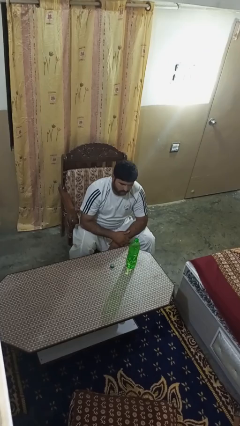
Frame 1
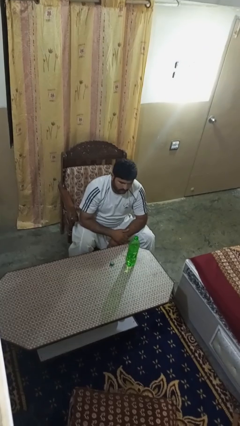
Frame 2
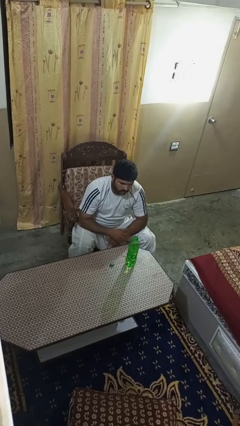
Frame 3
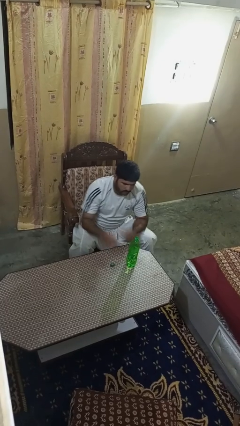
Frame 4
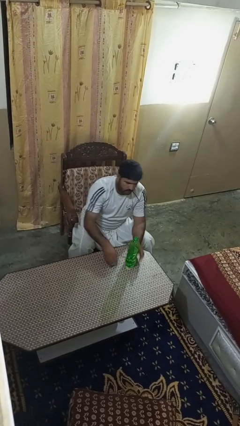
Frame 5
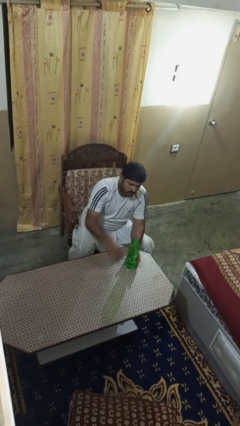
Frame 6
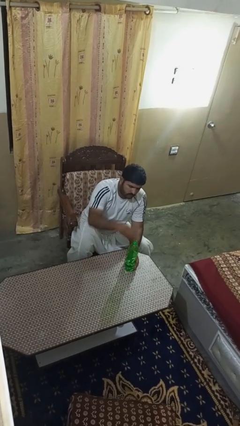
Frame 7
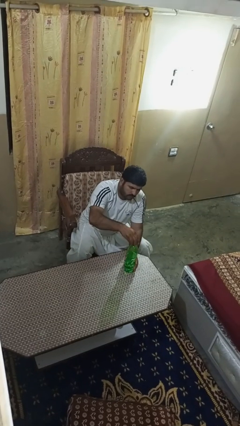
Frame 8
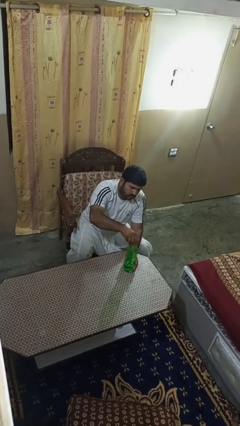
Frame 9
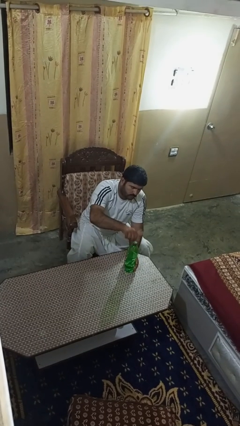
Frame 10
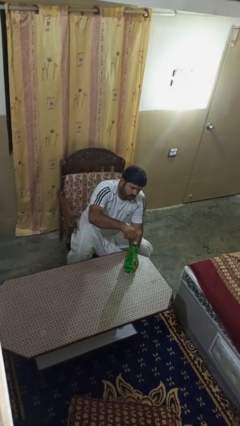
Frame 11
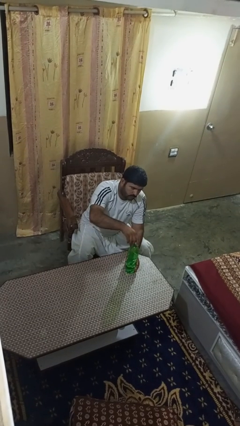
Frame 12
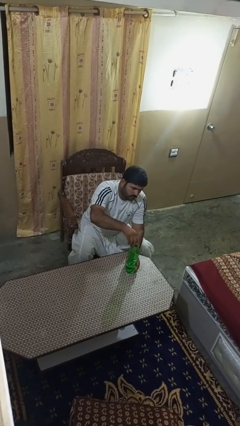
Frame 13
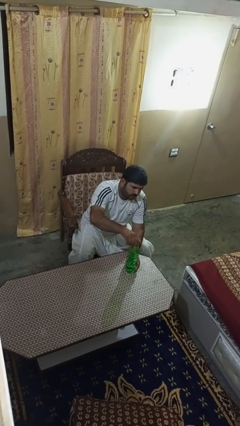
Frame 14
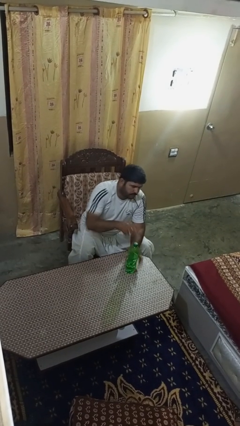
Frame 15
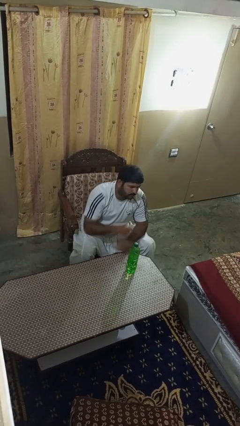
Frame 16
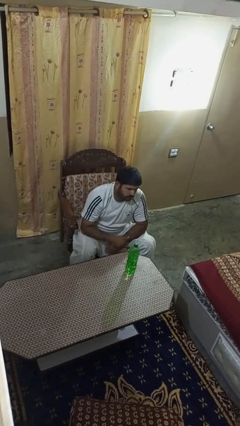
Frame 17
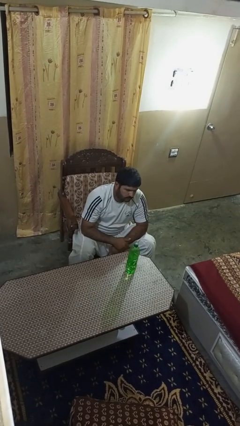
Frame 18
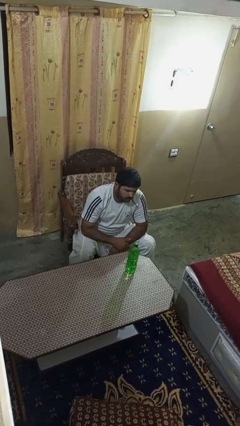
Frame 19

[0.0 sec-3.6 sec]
person screws lid to bottle

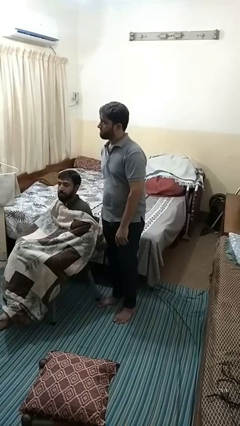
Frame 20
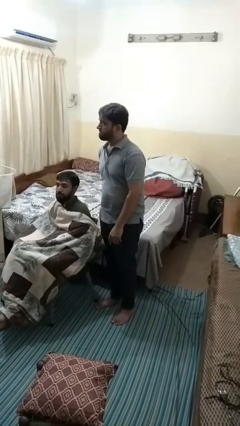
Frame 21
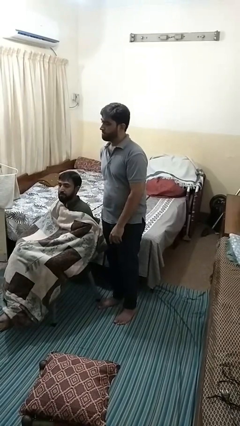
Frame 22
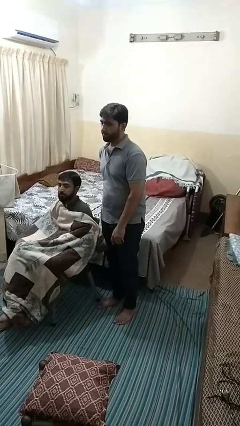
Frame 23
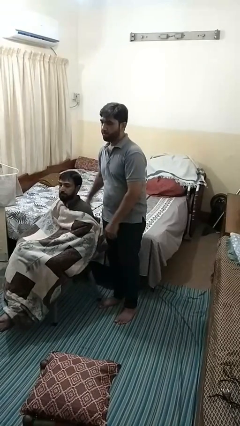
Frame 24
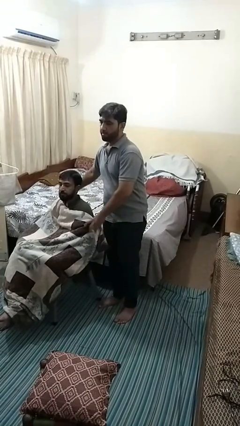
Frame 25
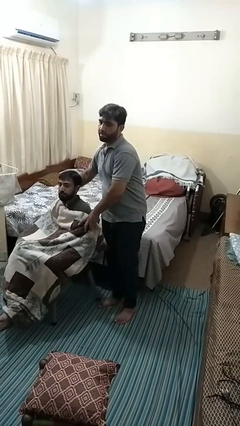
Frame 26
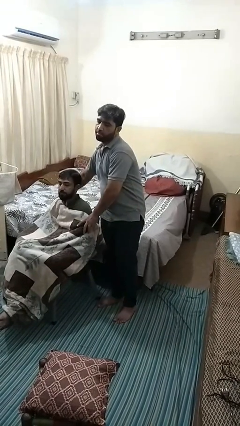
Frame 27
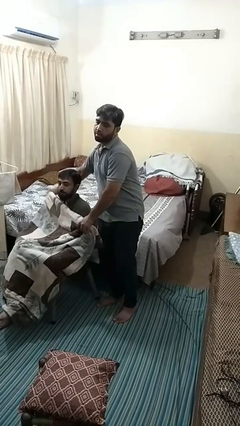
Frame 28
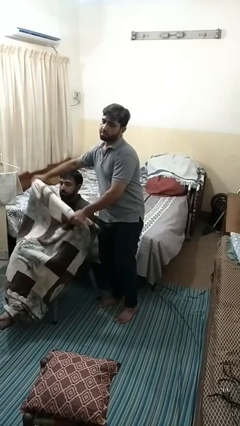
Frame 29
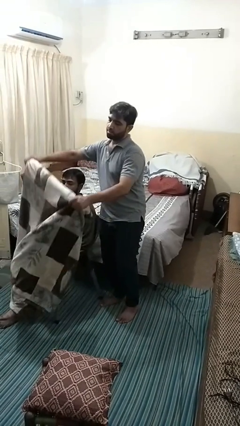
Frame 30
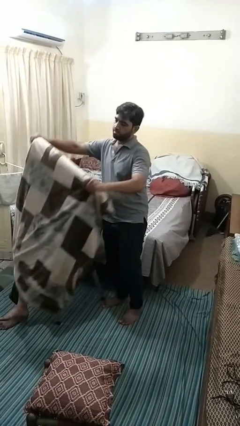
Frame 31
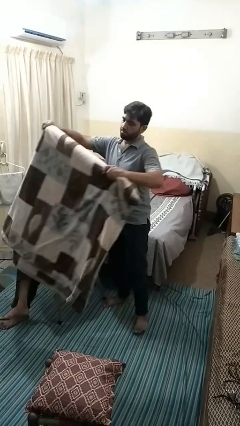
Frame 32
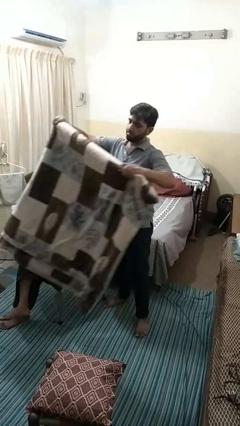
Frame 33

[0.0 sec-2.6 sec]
person uncovers friend with blanket

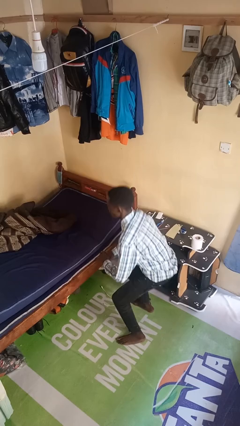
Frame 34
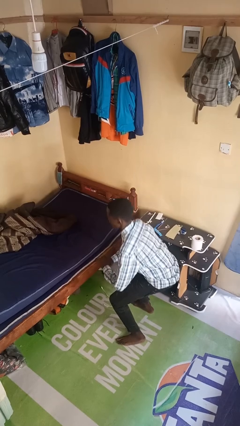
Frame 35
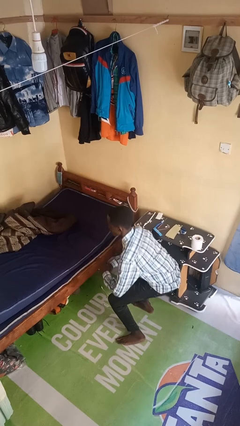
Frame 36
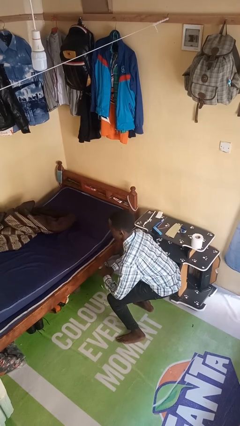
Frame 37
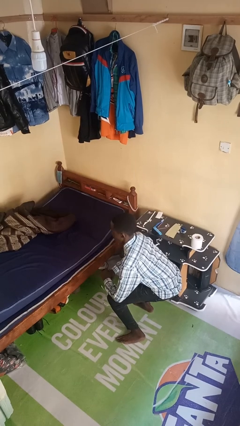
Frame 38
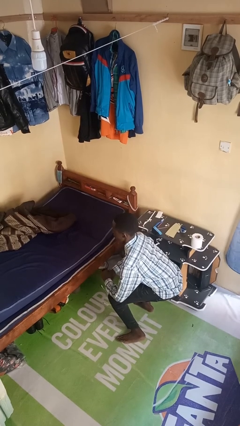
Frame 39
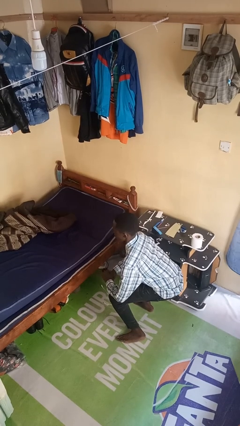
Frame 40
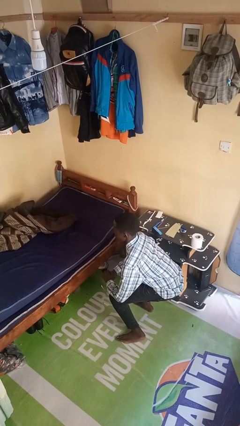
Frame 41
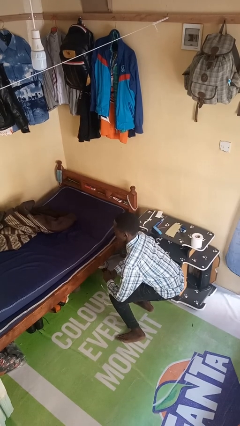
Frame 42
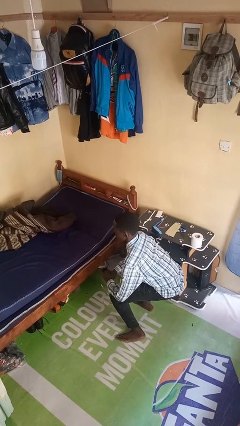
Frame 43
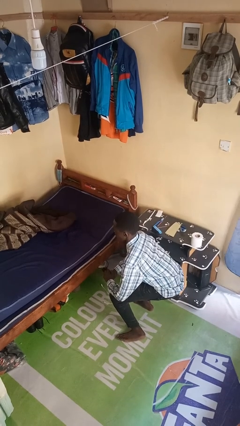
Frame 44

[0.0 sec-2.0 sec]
person squats

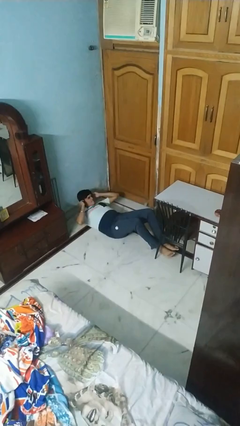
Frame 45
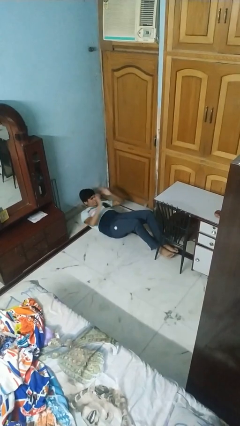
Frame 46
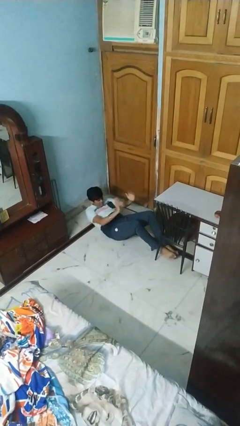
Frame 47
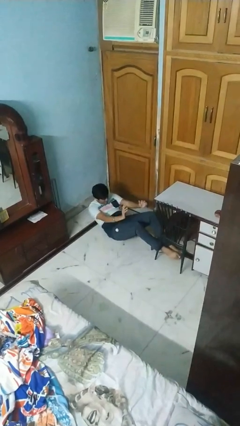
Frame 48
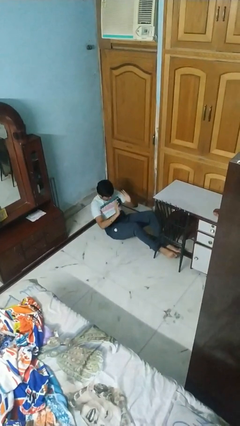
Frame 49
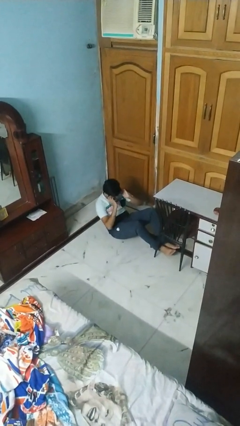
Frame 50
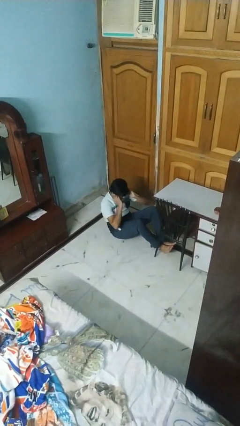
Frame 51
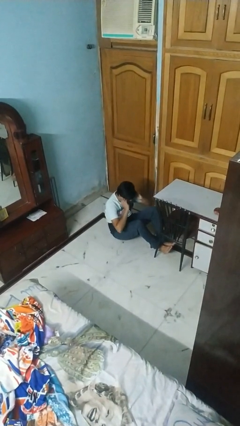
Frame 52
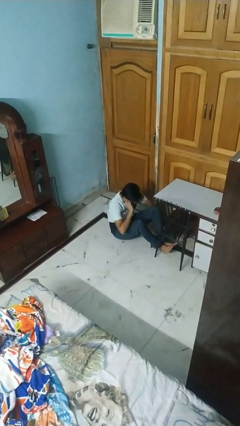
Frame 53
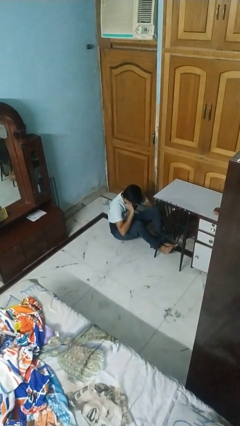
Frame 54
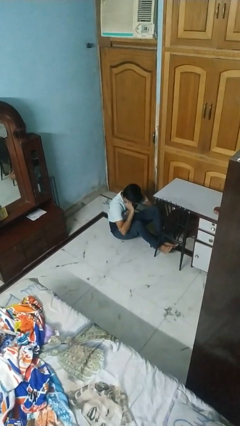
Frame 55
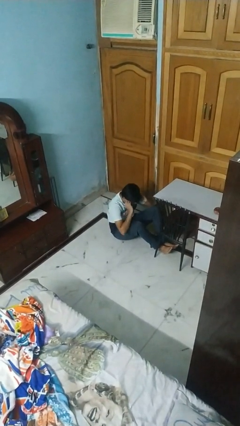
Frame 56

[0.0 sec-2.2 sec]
person exercises with situp

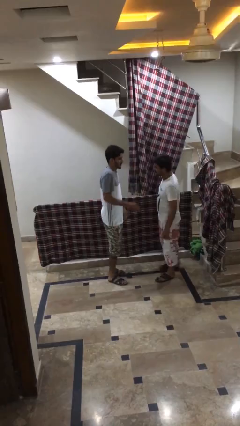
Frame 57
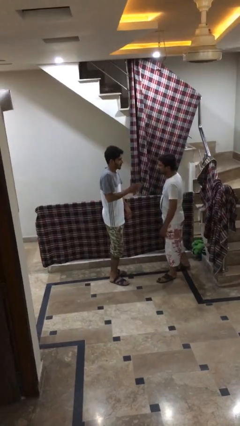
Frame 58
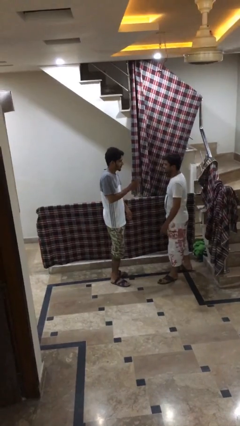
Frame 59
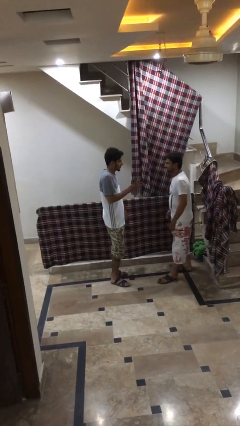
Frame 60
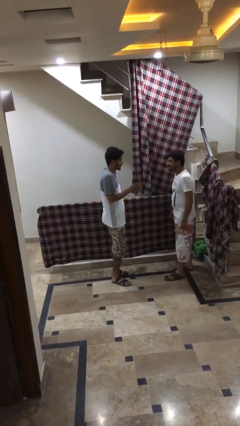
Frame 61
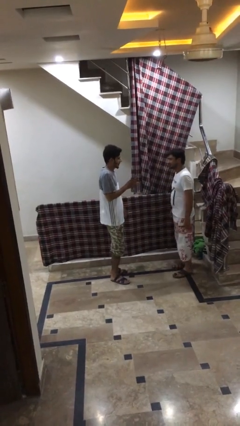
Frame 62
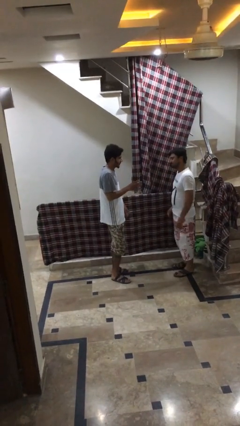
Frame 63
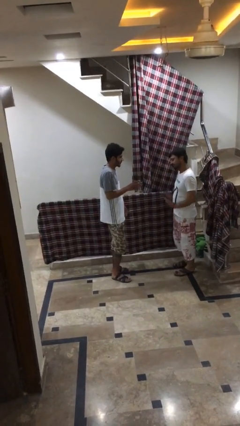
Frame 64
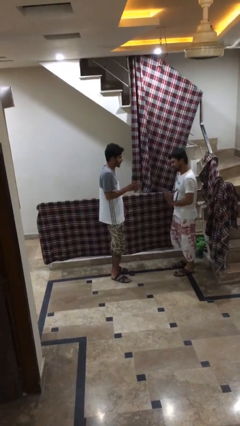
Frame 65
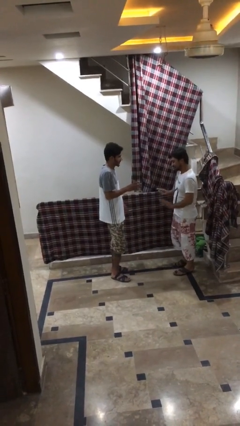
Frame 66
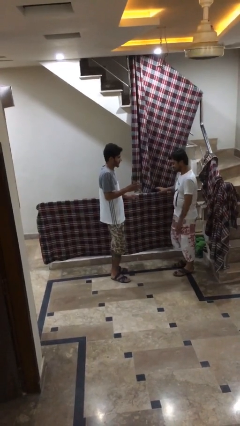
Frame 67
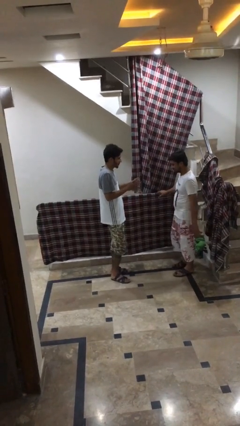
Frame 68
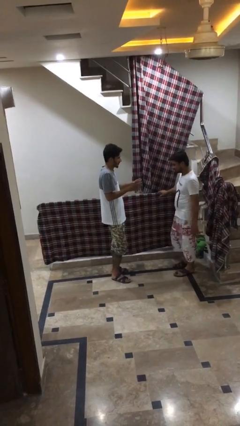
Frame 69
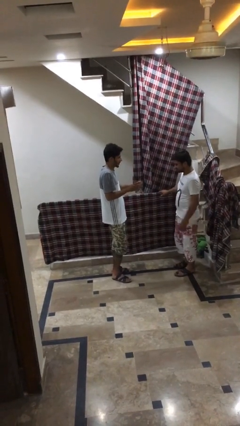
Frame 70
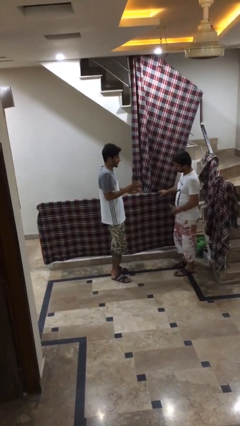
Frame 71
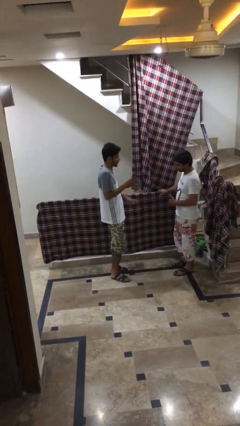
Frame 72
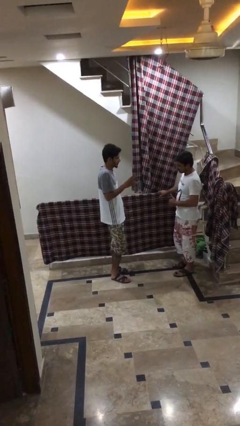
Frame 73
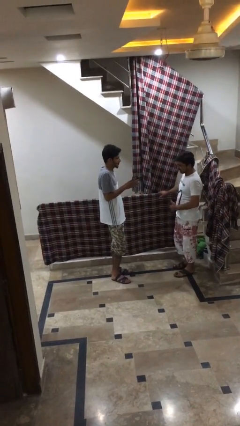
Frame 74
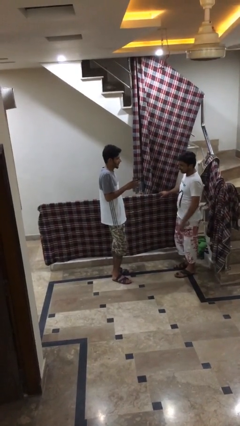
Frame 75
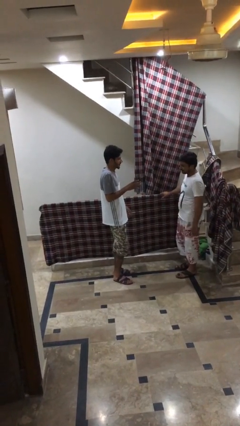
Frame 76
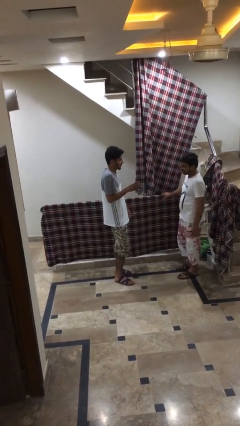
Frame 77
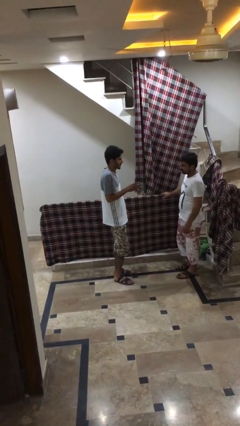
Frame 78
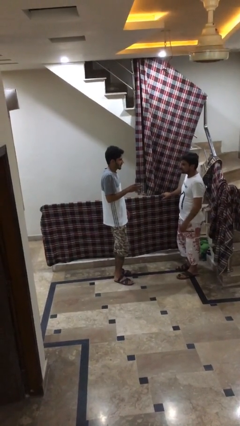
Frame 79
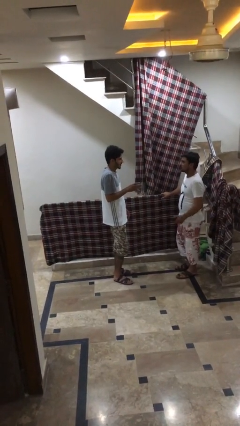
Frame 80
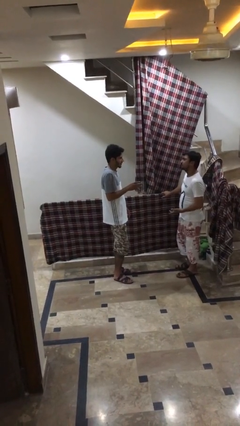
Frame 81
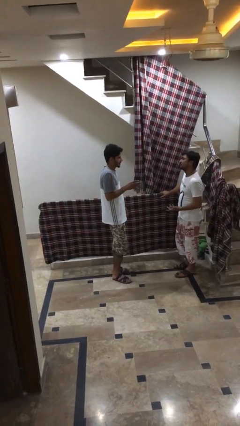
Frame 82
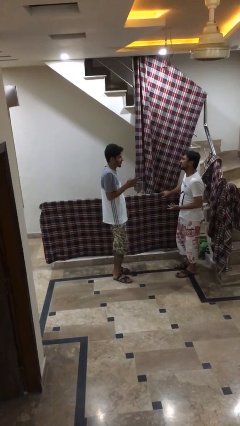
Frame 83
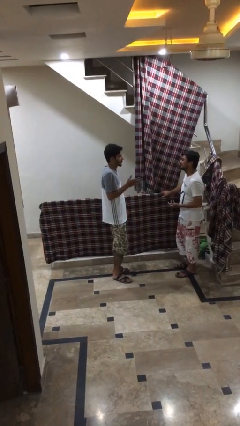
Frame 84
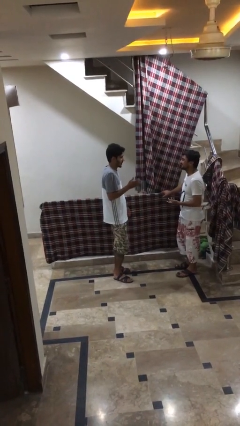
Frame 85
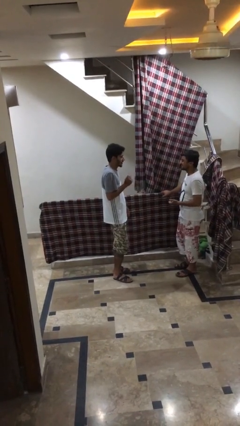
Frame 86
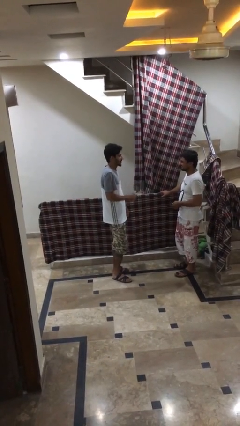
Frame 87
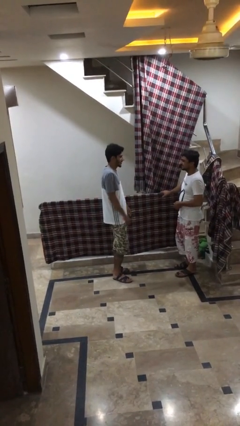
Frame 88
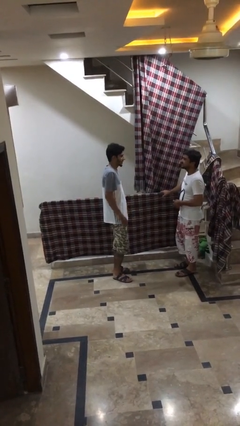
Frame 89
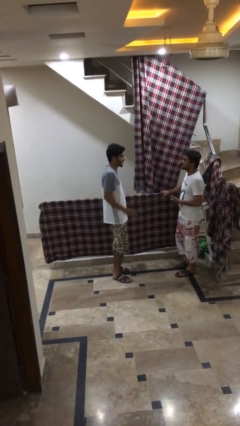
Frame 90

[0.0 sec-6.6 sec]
person talks to person

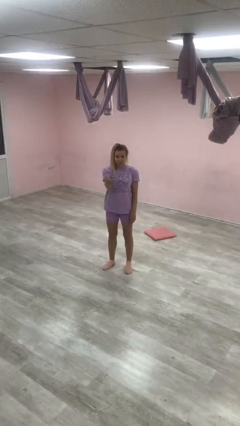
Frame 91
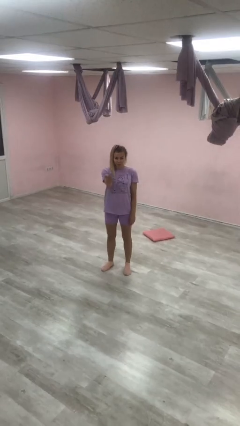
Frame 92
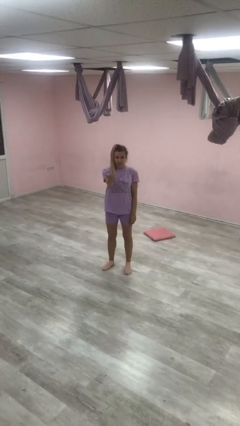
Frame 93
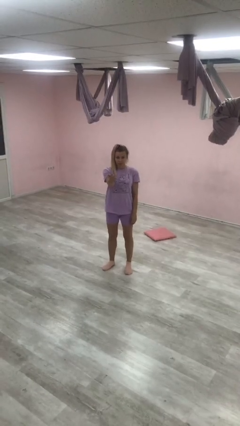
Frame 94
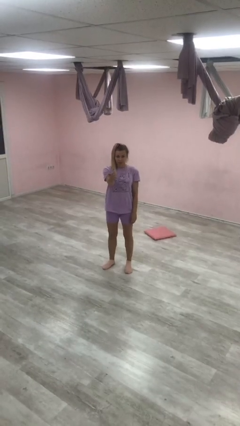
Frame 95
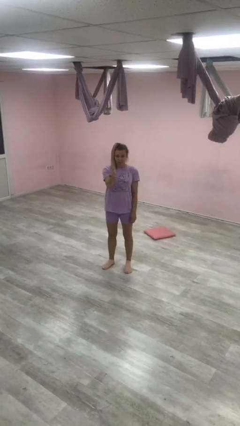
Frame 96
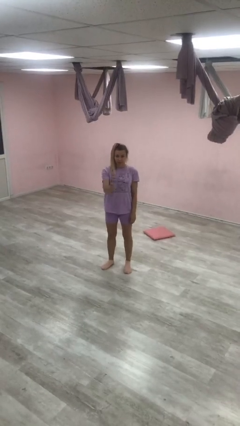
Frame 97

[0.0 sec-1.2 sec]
person gestures come here
